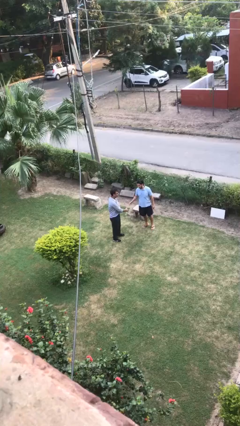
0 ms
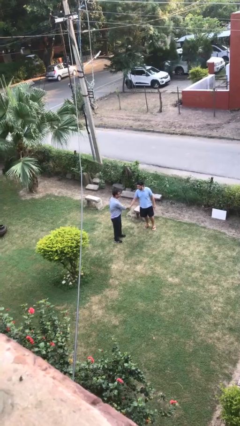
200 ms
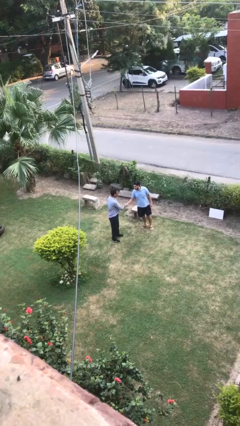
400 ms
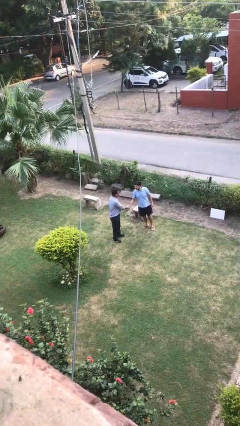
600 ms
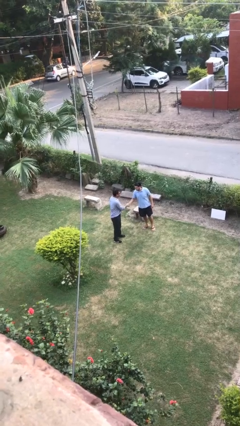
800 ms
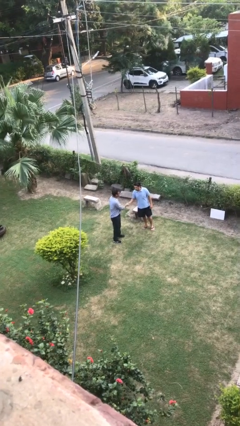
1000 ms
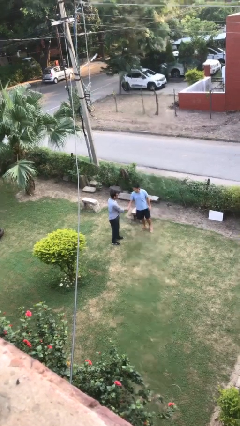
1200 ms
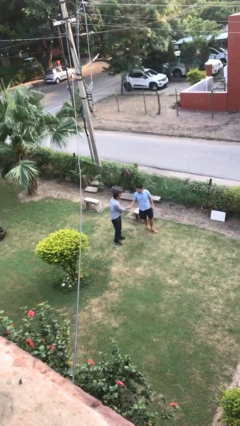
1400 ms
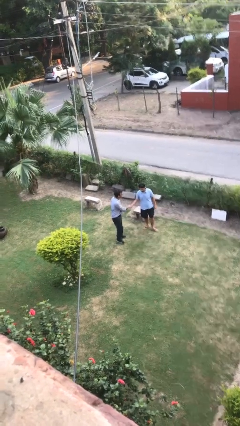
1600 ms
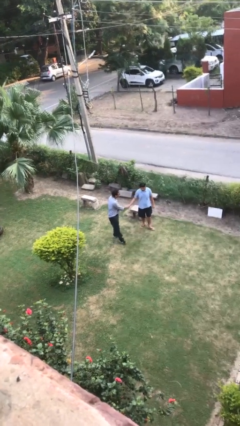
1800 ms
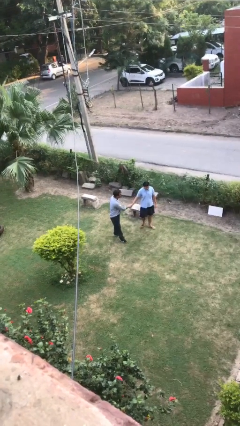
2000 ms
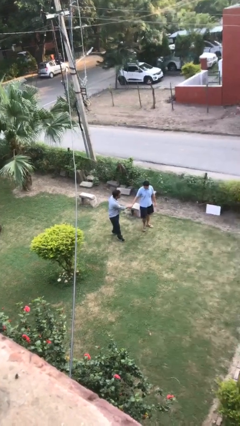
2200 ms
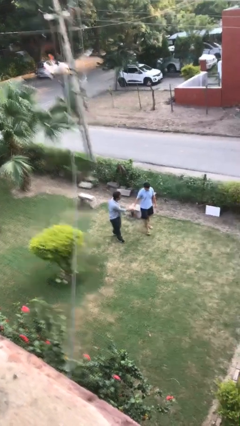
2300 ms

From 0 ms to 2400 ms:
person shakes hand

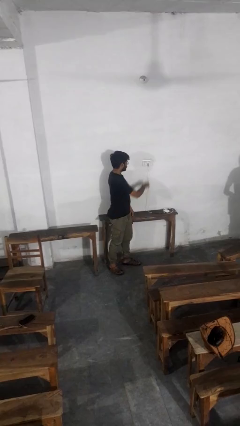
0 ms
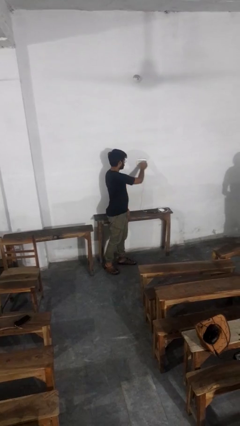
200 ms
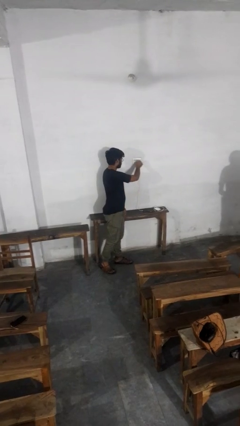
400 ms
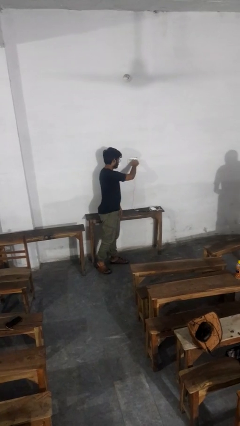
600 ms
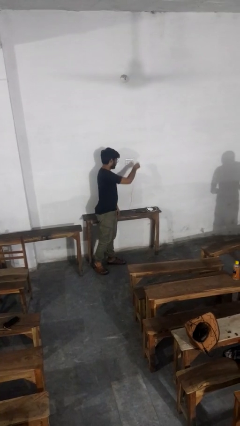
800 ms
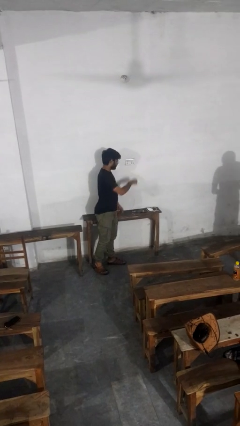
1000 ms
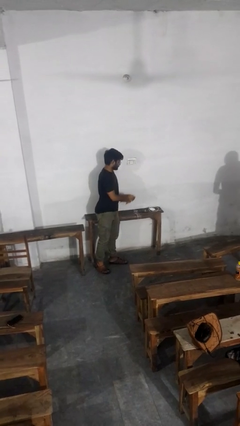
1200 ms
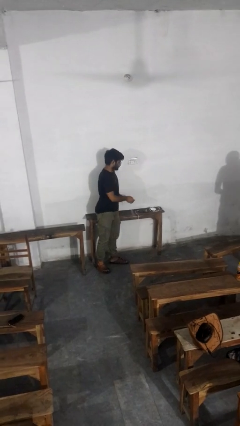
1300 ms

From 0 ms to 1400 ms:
person unplugs from electrical socket

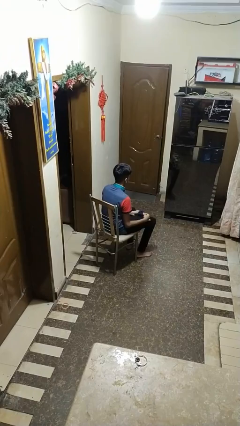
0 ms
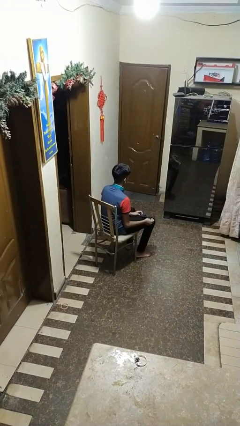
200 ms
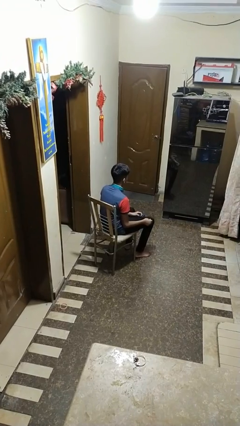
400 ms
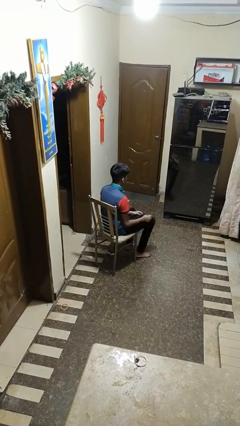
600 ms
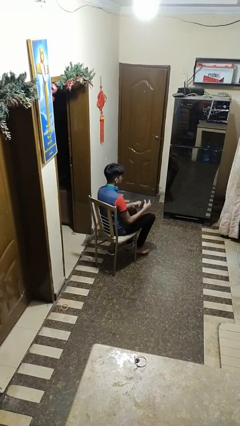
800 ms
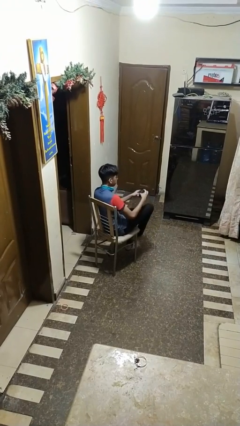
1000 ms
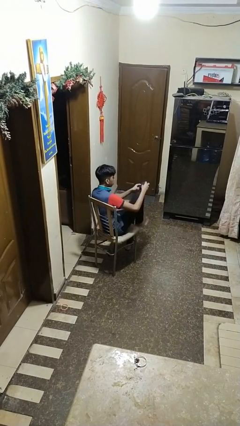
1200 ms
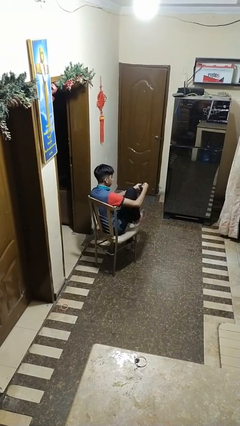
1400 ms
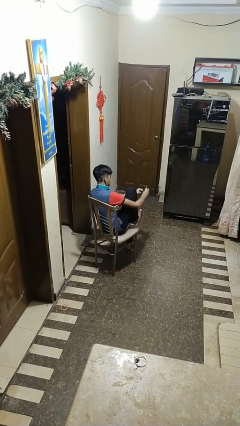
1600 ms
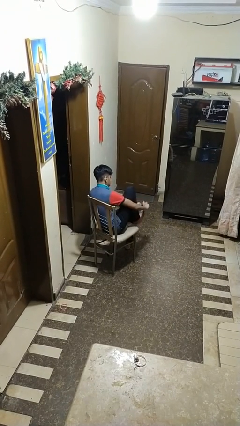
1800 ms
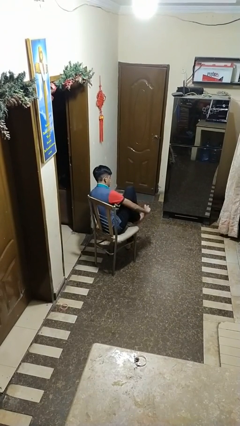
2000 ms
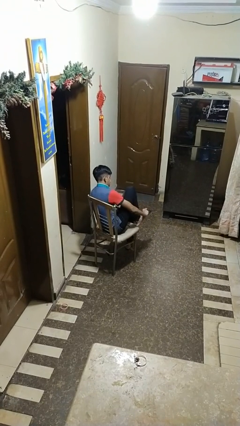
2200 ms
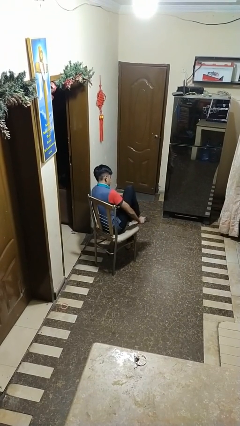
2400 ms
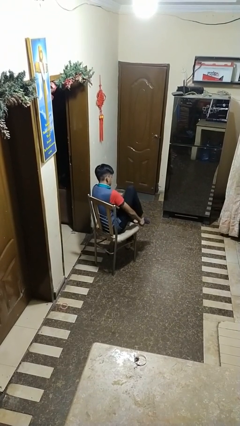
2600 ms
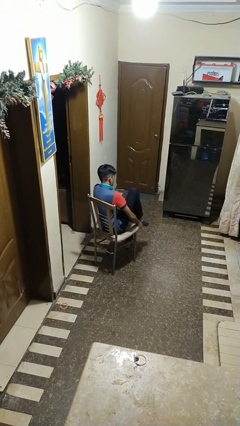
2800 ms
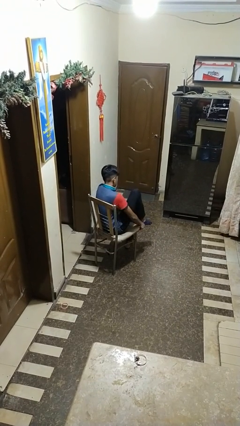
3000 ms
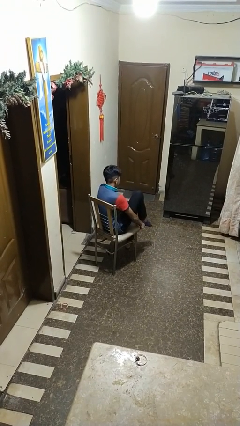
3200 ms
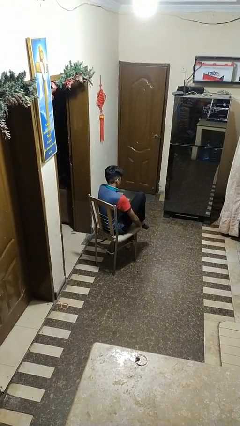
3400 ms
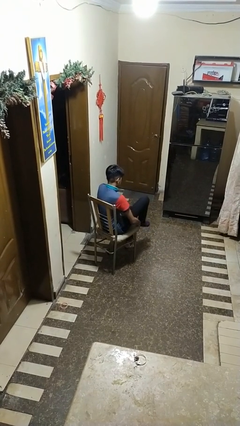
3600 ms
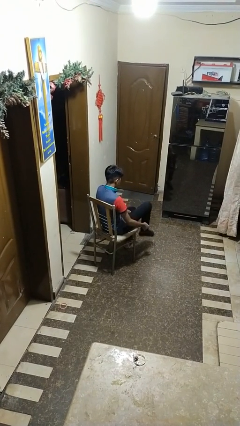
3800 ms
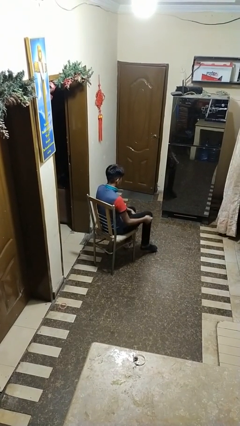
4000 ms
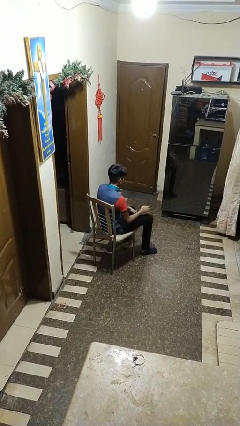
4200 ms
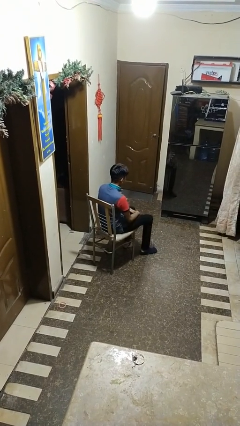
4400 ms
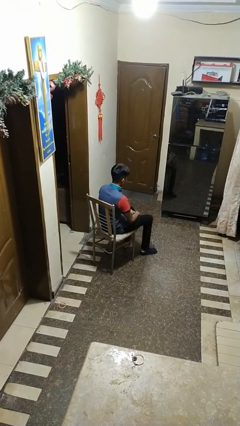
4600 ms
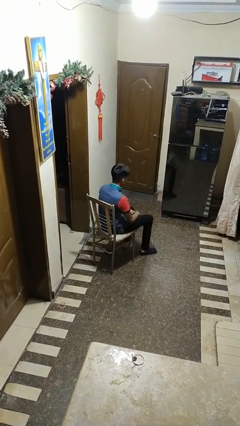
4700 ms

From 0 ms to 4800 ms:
person puts on socks

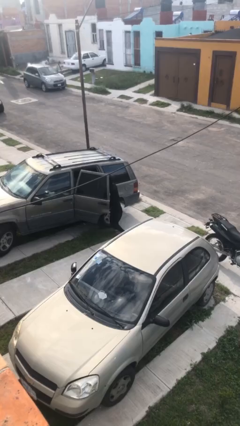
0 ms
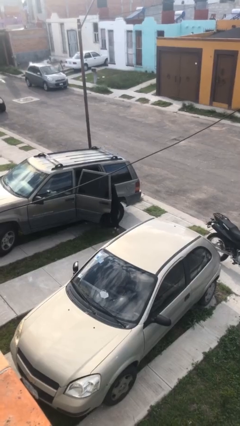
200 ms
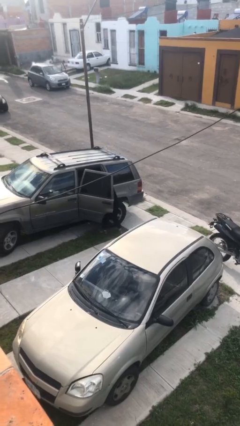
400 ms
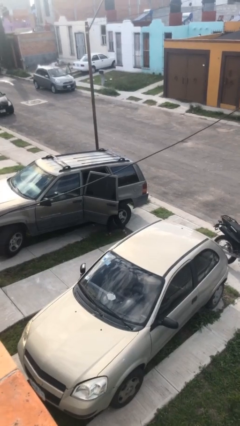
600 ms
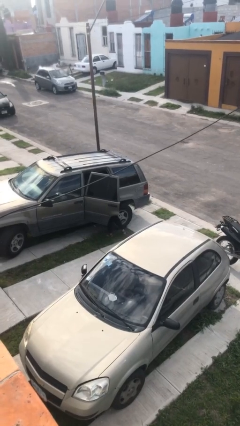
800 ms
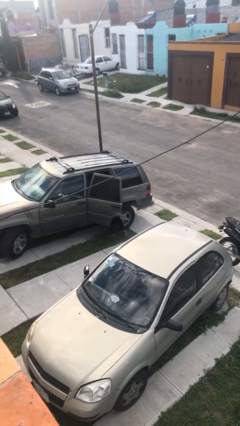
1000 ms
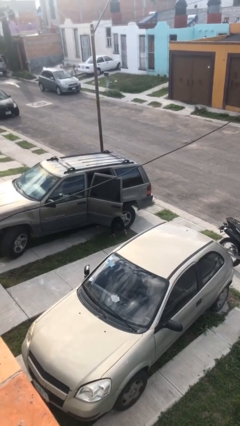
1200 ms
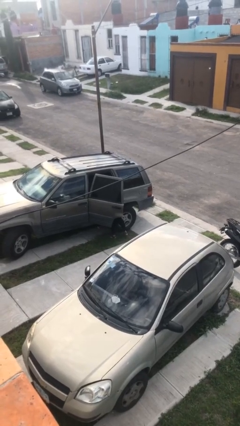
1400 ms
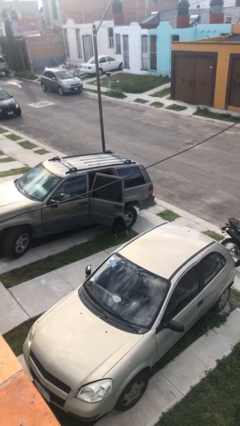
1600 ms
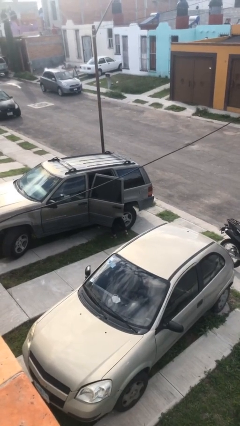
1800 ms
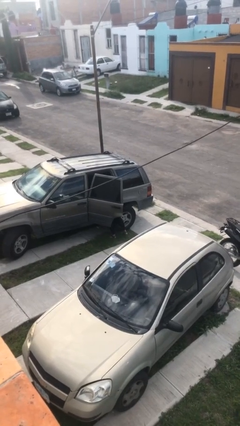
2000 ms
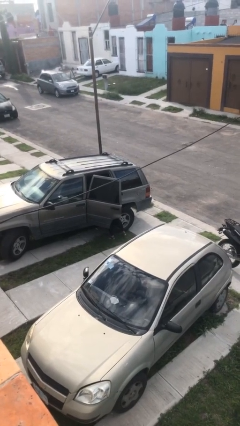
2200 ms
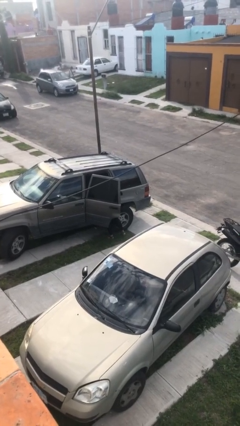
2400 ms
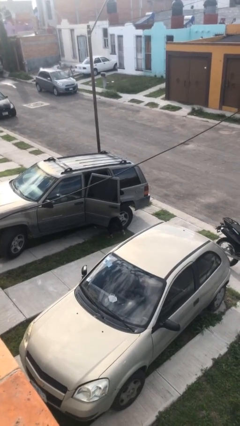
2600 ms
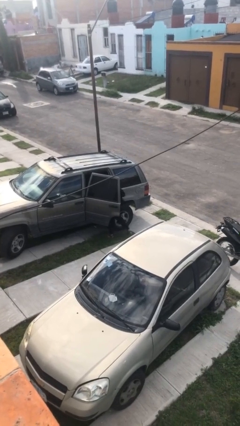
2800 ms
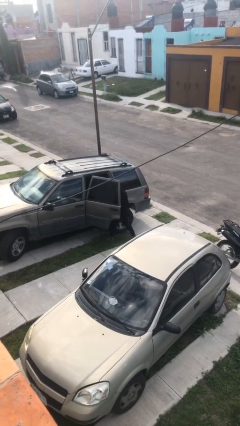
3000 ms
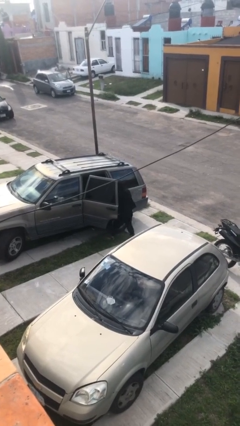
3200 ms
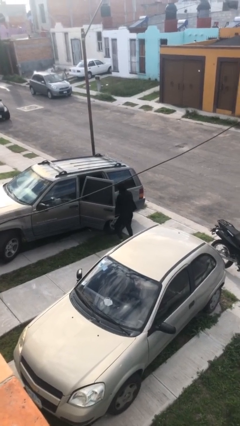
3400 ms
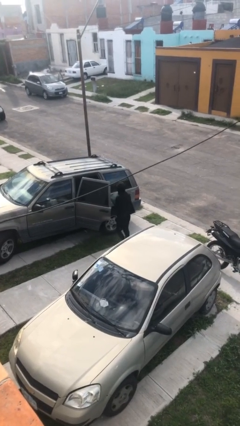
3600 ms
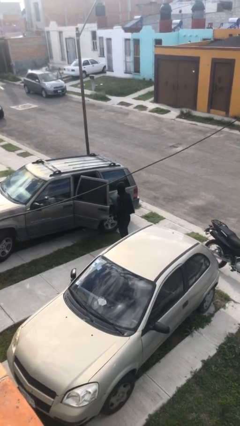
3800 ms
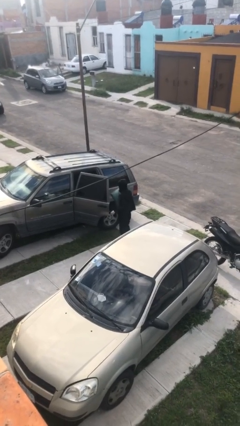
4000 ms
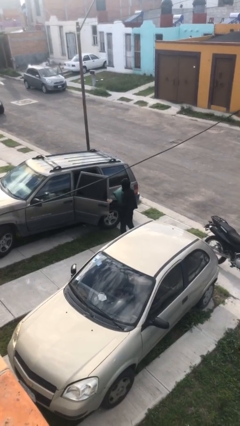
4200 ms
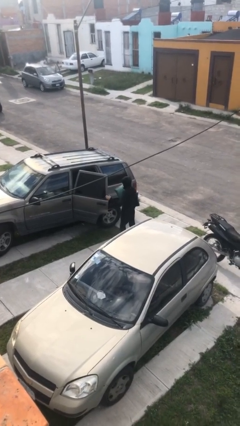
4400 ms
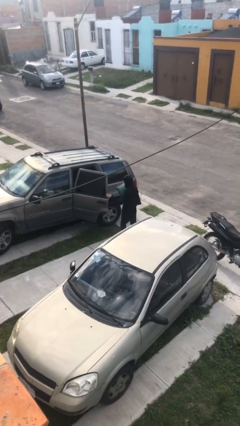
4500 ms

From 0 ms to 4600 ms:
person unloads car

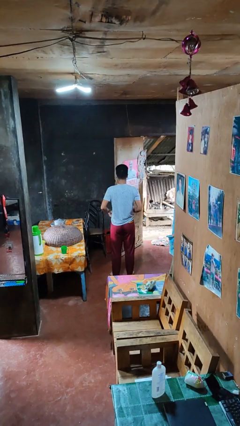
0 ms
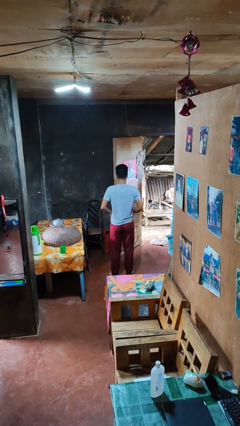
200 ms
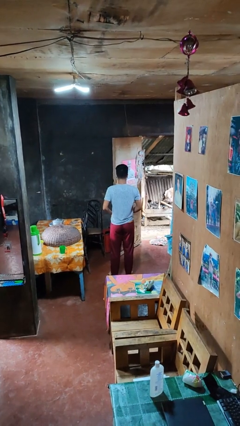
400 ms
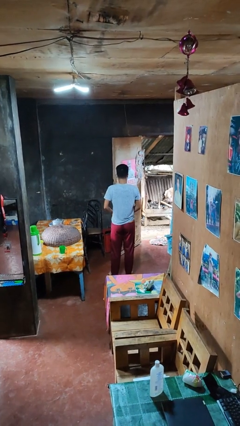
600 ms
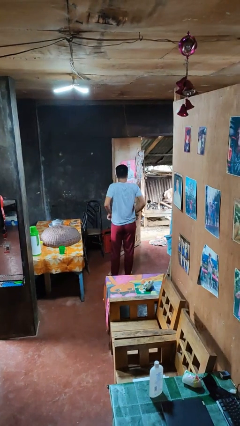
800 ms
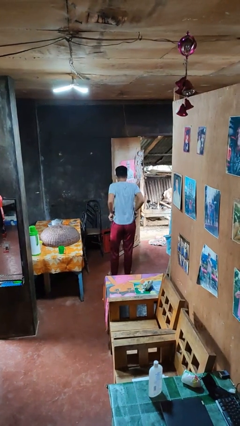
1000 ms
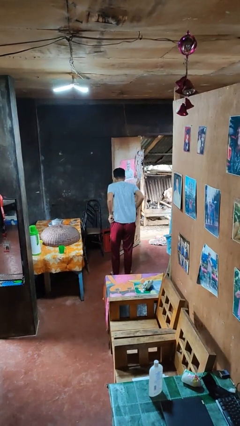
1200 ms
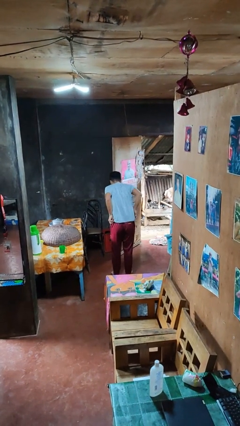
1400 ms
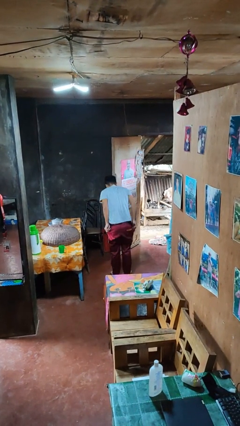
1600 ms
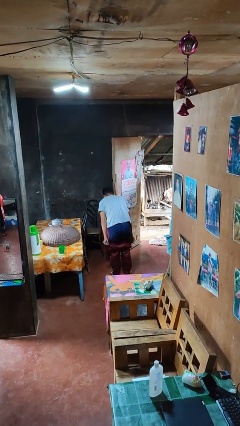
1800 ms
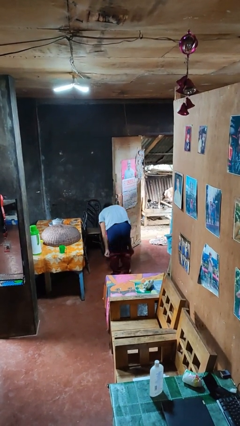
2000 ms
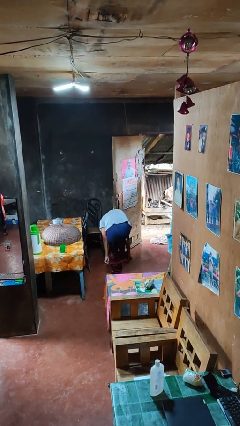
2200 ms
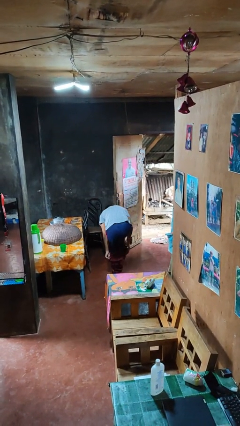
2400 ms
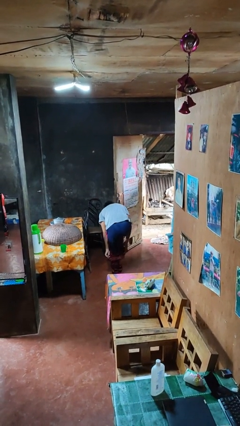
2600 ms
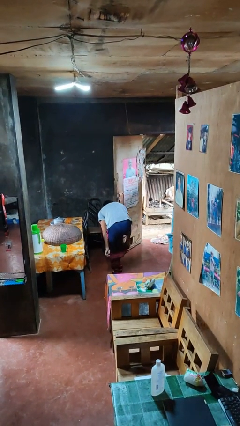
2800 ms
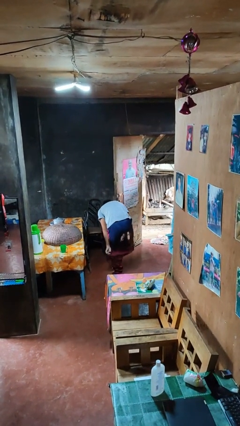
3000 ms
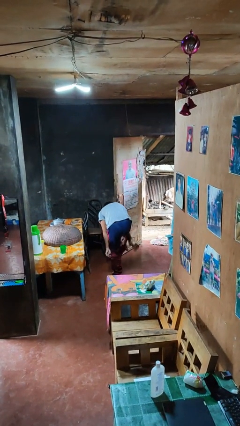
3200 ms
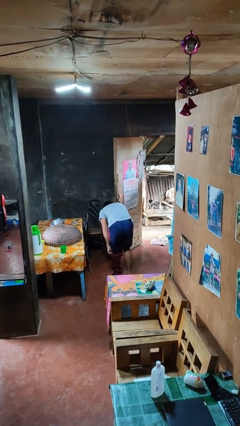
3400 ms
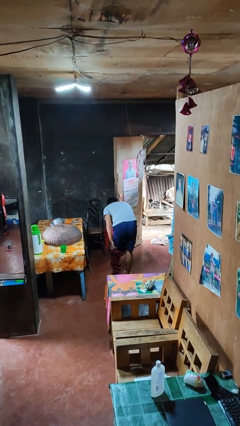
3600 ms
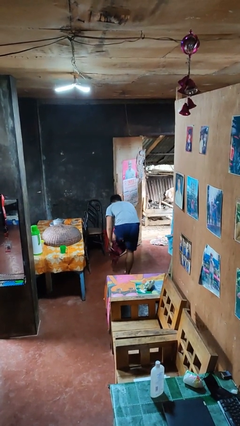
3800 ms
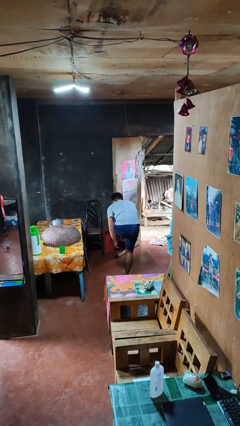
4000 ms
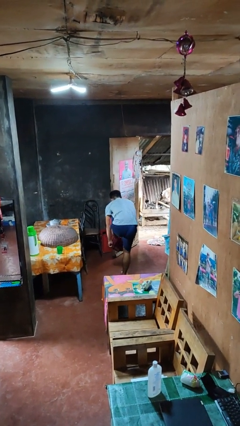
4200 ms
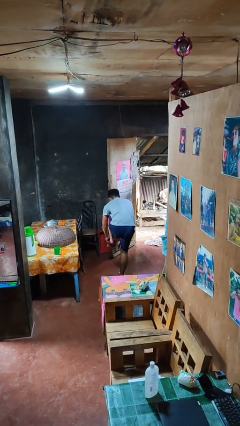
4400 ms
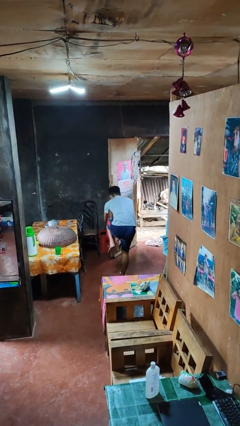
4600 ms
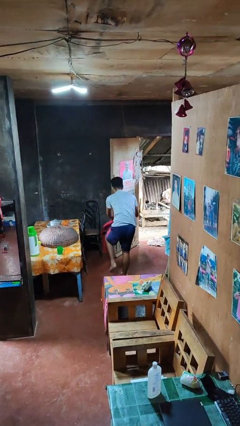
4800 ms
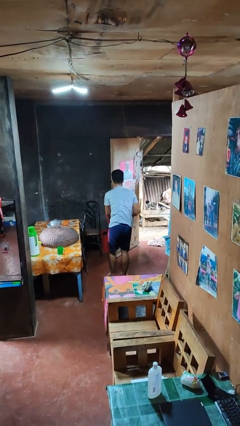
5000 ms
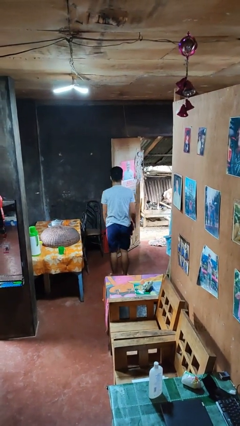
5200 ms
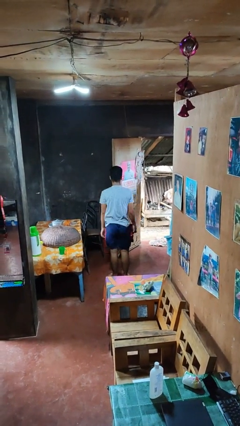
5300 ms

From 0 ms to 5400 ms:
person takes off pants
